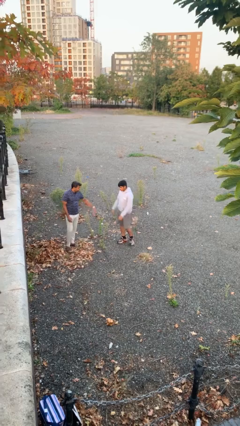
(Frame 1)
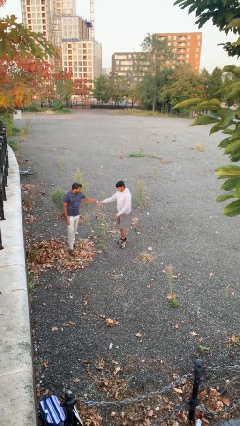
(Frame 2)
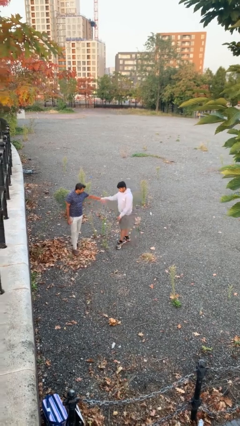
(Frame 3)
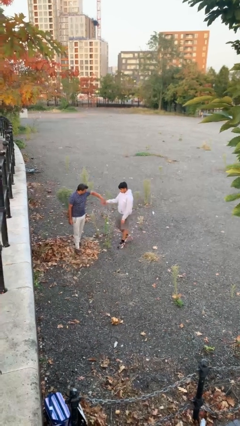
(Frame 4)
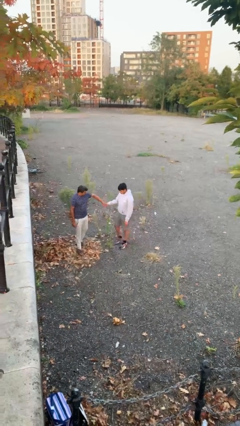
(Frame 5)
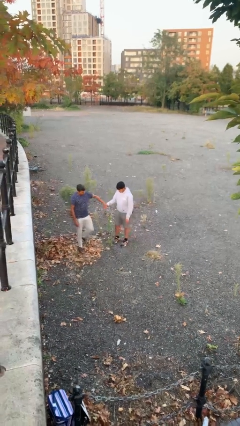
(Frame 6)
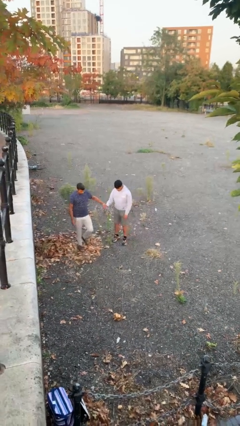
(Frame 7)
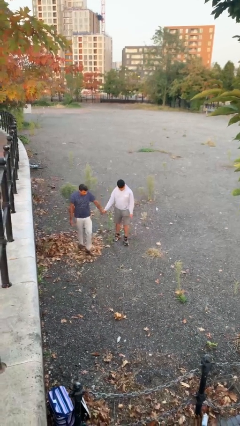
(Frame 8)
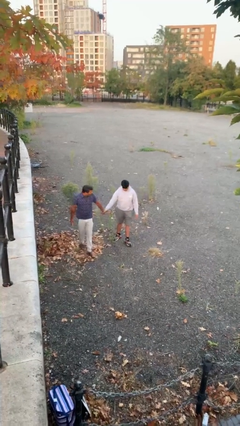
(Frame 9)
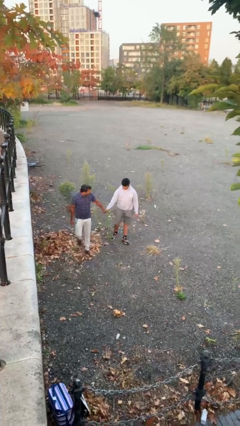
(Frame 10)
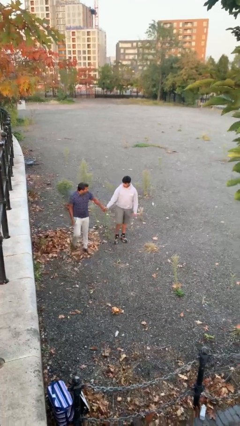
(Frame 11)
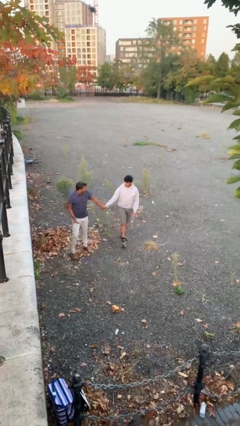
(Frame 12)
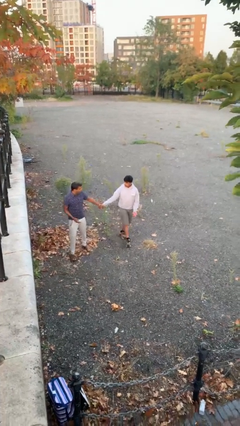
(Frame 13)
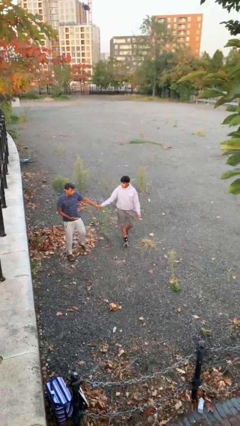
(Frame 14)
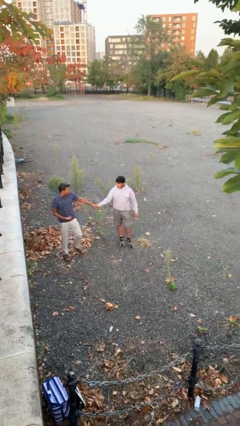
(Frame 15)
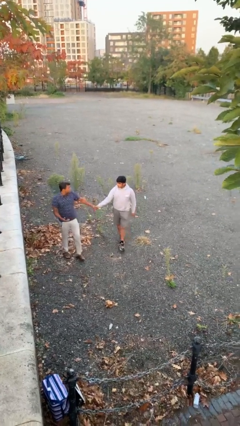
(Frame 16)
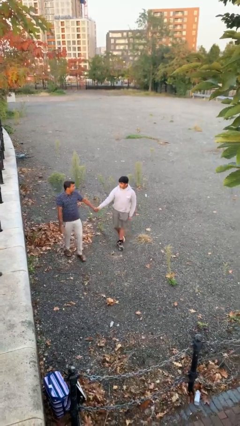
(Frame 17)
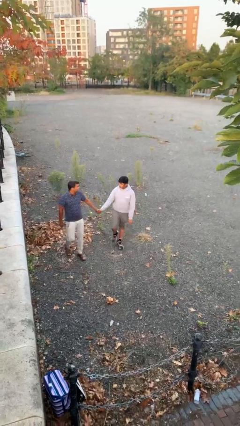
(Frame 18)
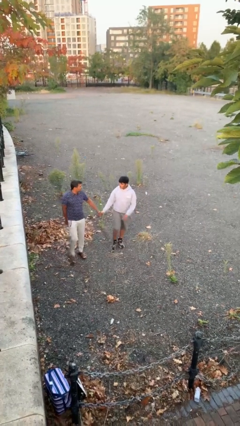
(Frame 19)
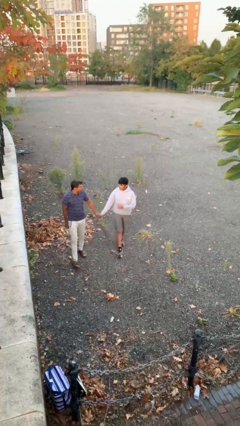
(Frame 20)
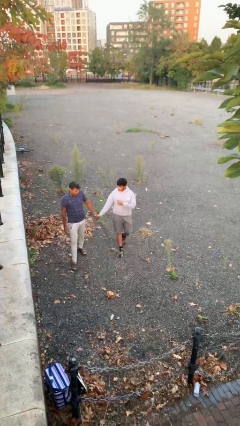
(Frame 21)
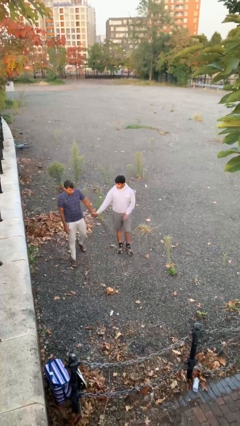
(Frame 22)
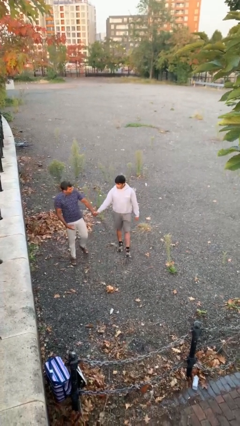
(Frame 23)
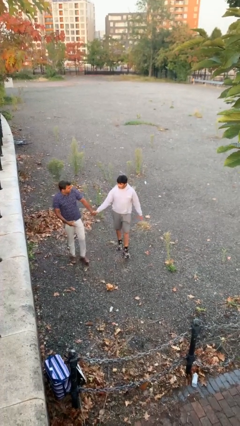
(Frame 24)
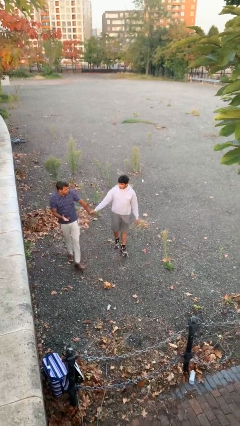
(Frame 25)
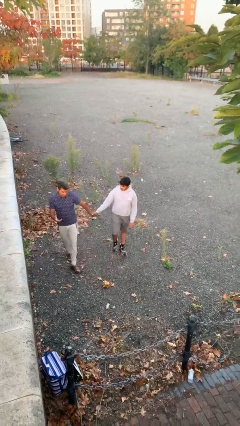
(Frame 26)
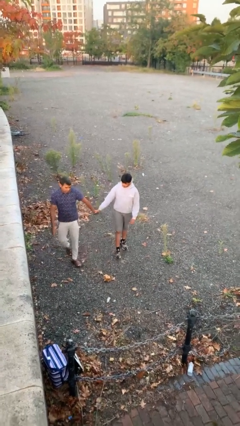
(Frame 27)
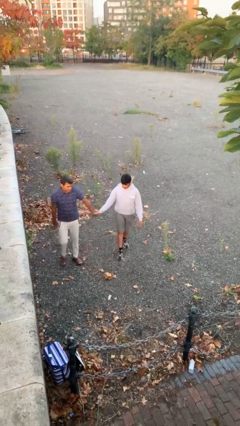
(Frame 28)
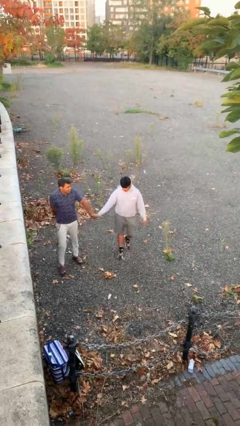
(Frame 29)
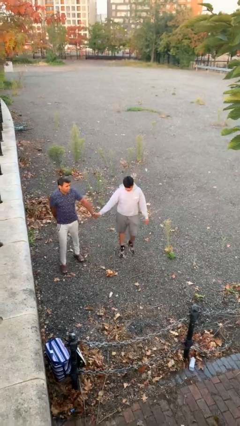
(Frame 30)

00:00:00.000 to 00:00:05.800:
person holds hand

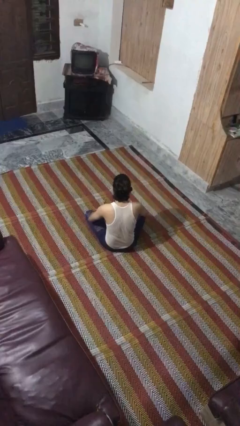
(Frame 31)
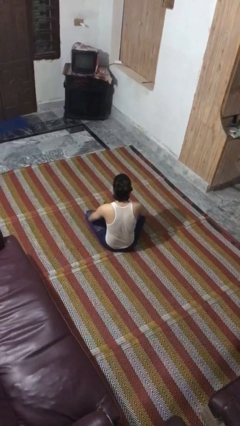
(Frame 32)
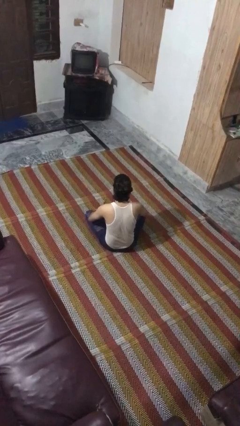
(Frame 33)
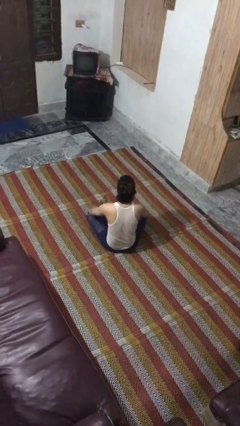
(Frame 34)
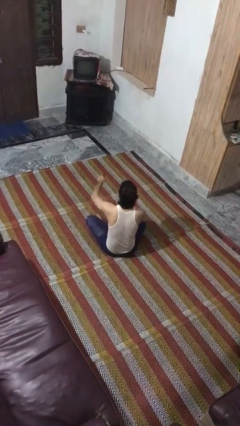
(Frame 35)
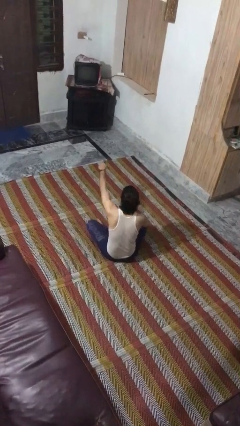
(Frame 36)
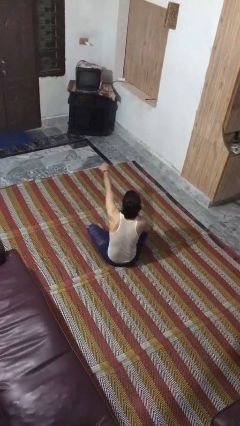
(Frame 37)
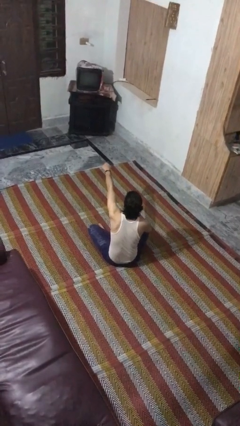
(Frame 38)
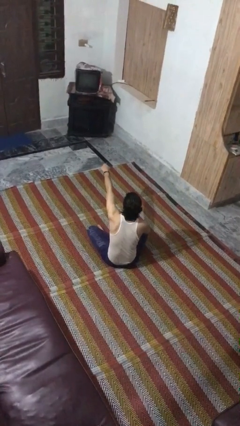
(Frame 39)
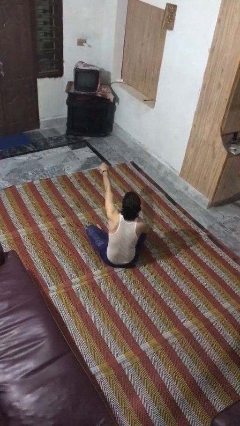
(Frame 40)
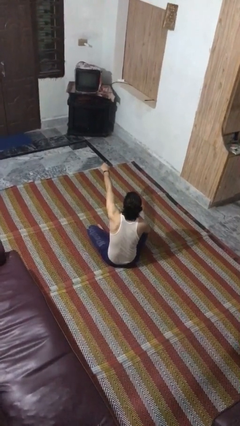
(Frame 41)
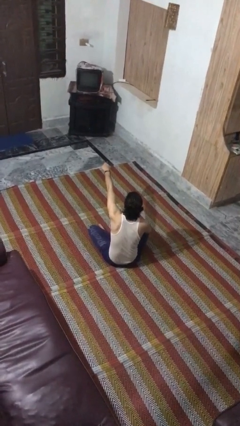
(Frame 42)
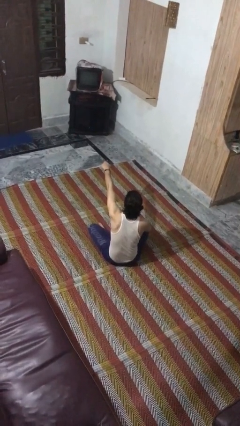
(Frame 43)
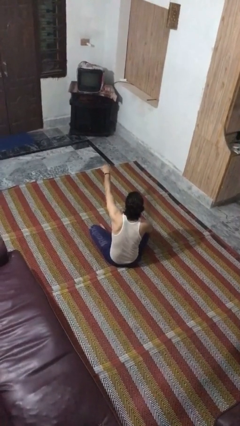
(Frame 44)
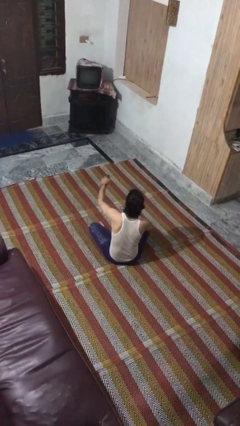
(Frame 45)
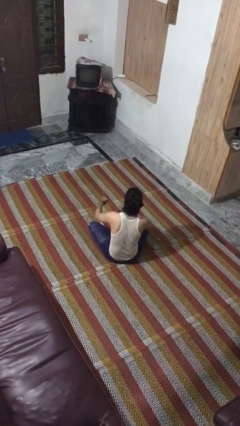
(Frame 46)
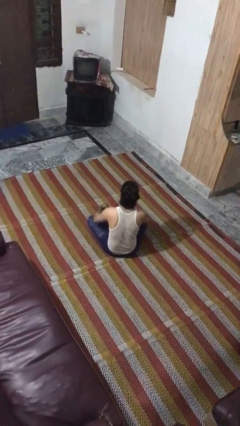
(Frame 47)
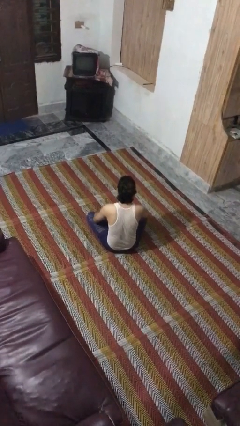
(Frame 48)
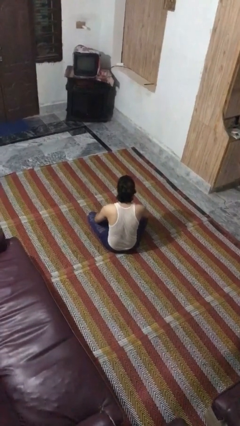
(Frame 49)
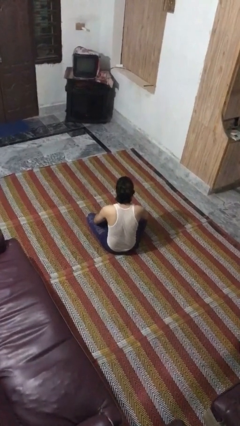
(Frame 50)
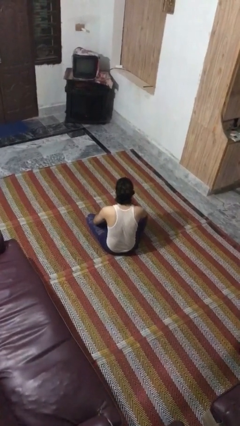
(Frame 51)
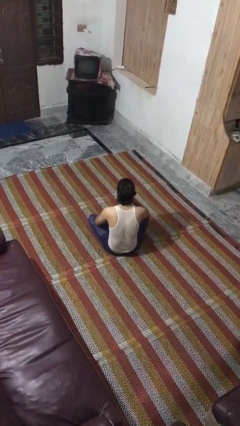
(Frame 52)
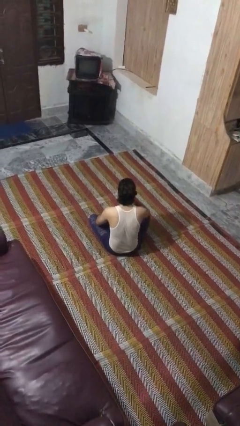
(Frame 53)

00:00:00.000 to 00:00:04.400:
person uses television remote

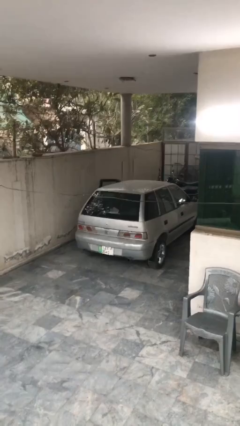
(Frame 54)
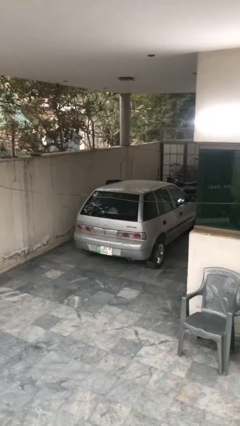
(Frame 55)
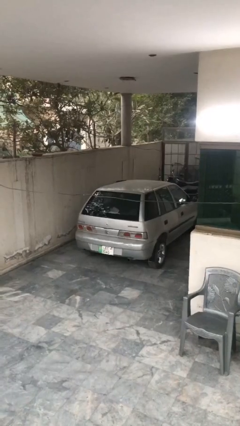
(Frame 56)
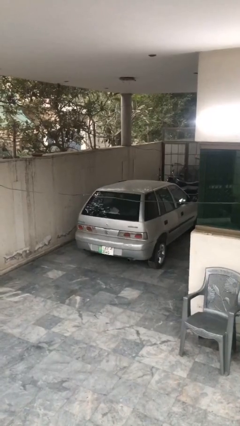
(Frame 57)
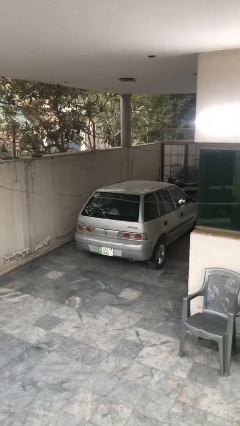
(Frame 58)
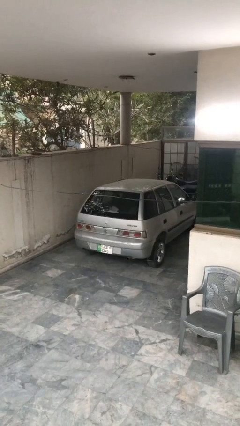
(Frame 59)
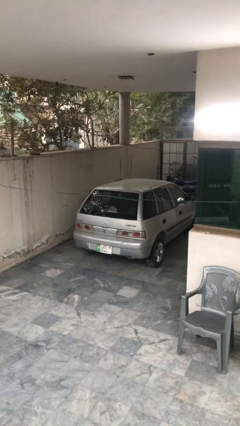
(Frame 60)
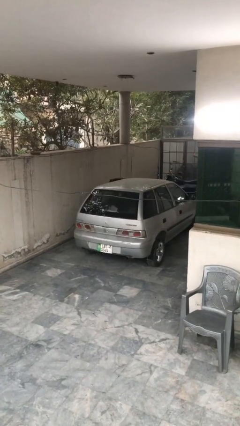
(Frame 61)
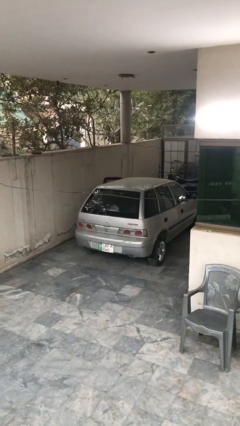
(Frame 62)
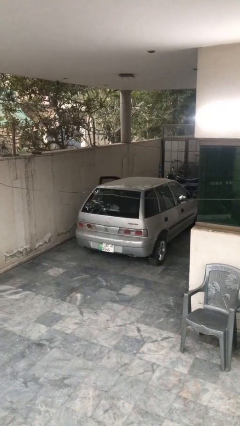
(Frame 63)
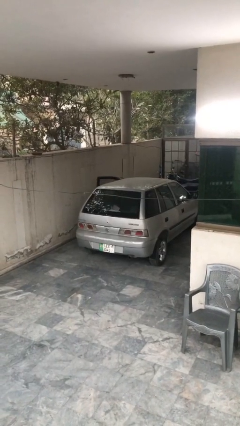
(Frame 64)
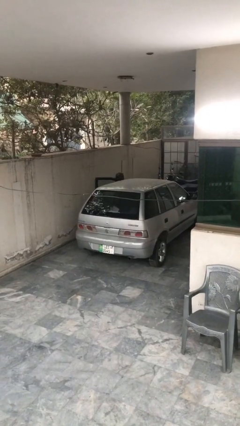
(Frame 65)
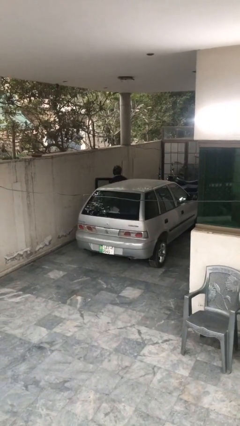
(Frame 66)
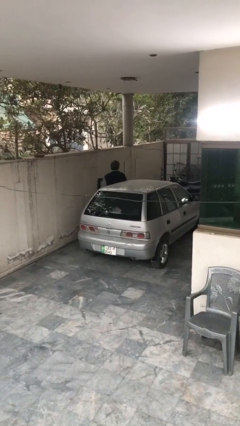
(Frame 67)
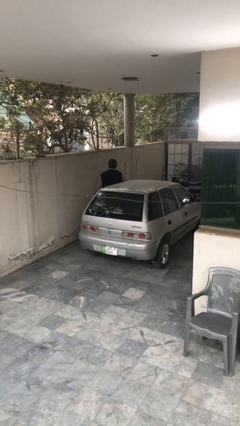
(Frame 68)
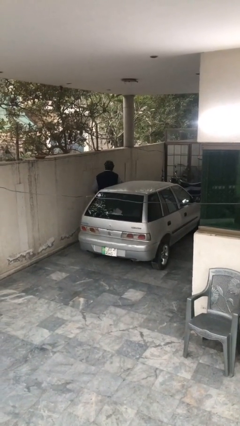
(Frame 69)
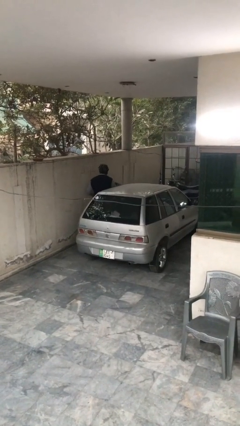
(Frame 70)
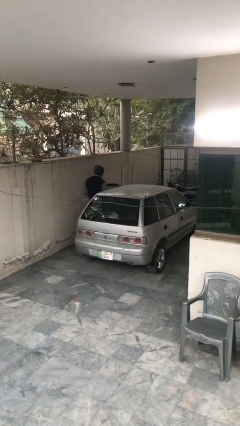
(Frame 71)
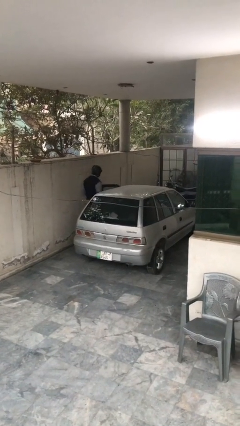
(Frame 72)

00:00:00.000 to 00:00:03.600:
car drops off person

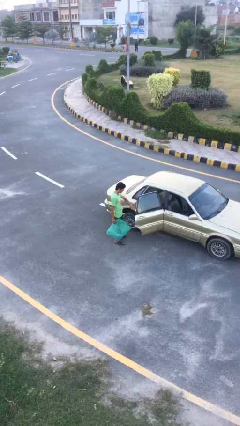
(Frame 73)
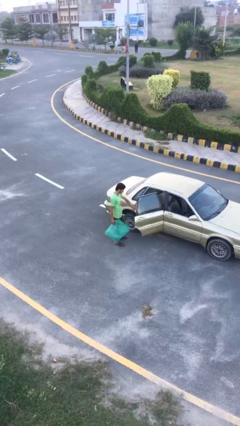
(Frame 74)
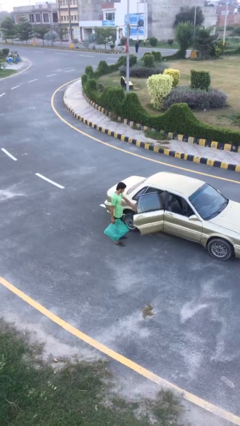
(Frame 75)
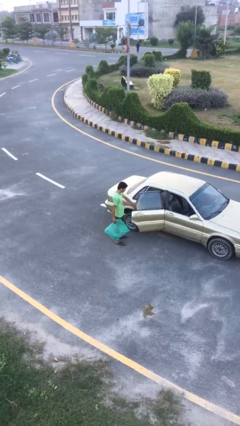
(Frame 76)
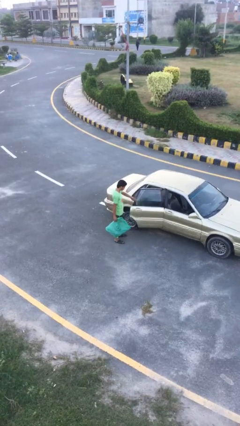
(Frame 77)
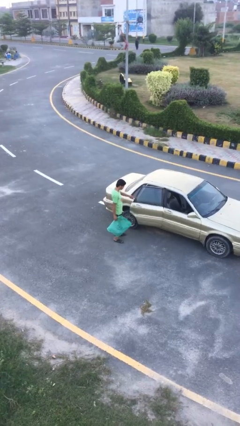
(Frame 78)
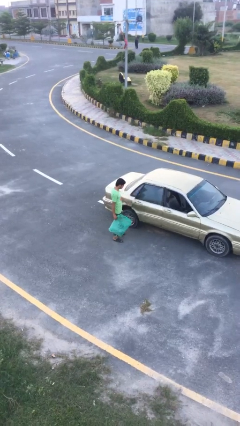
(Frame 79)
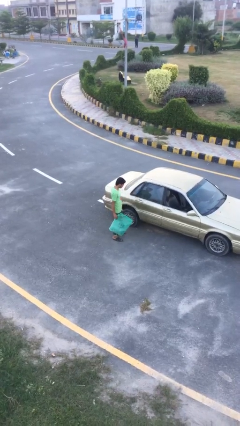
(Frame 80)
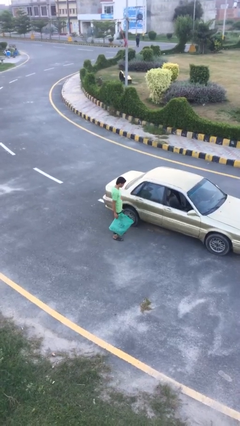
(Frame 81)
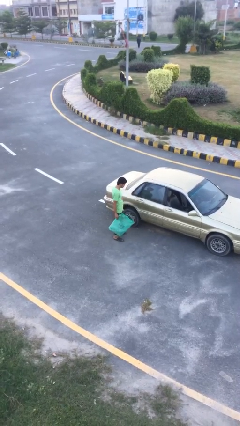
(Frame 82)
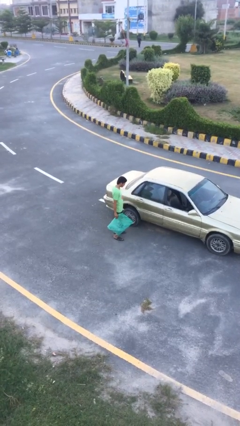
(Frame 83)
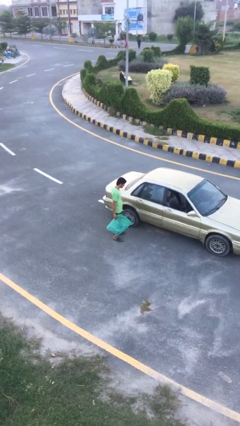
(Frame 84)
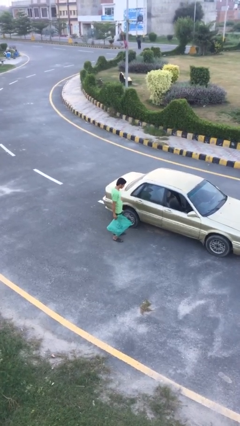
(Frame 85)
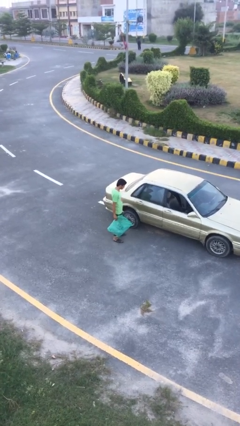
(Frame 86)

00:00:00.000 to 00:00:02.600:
person closes car door

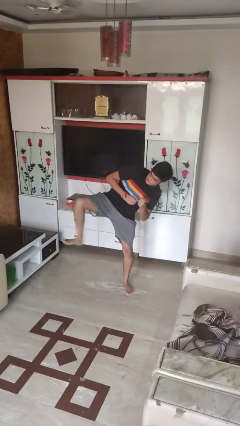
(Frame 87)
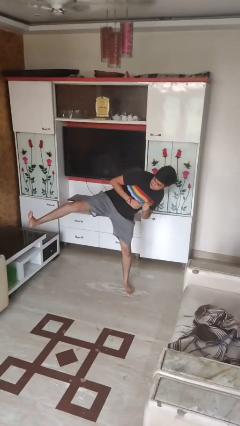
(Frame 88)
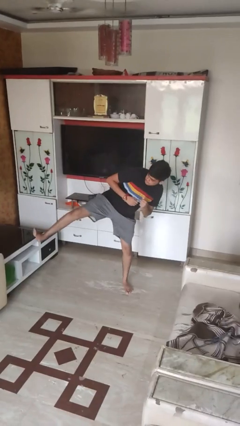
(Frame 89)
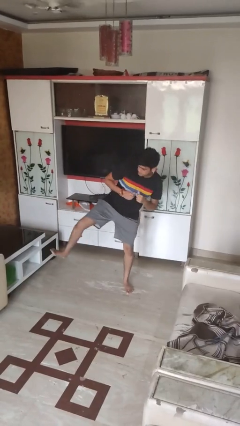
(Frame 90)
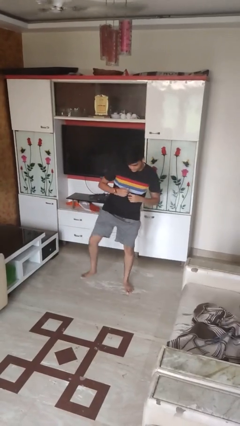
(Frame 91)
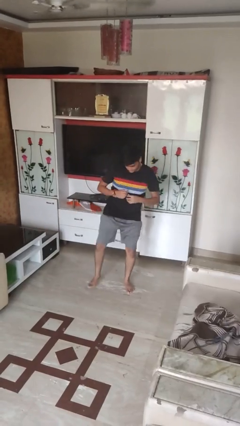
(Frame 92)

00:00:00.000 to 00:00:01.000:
person karate kicks

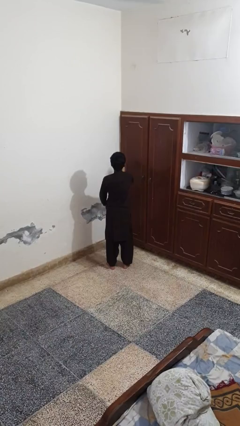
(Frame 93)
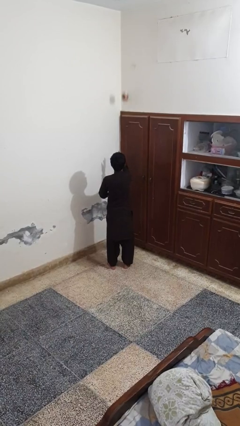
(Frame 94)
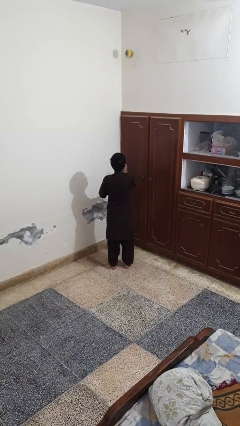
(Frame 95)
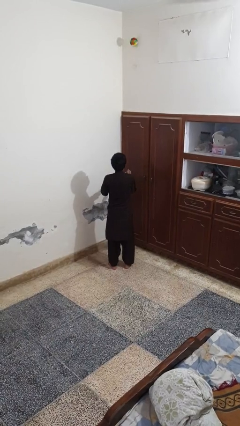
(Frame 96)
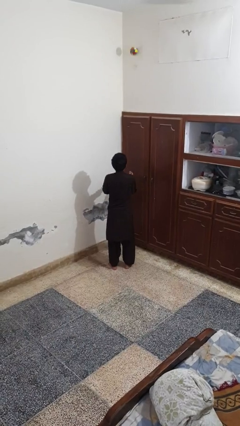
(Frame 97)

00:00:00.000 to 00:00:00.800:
person drops object
